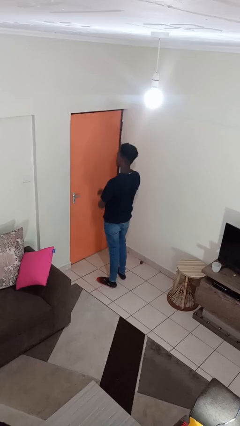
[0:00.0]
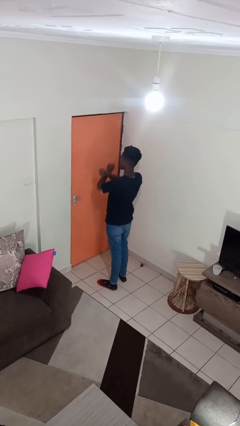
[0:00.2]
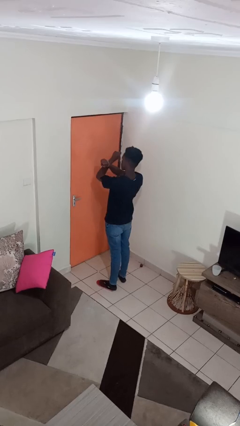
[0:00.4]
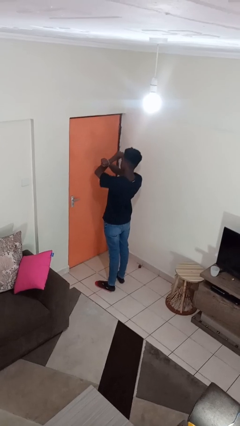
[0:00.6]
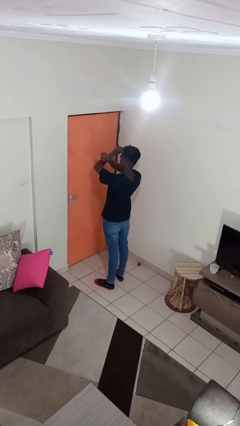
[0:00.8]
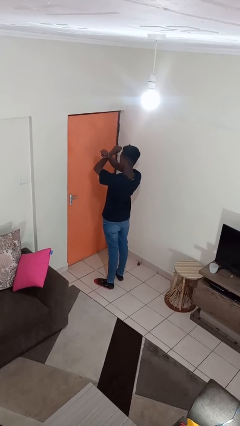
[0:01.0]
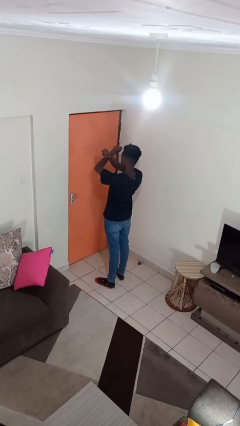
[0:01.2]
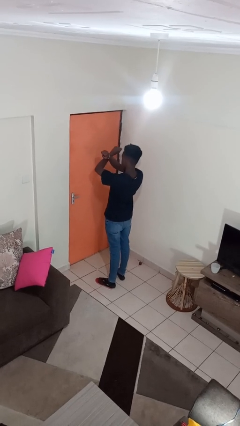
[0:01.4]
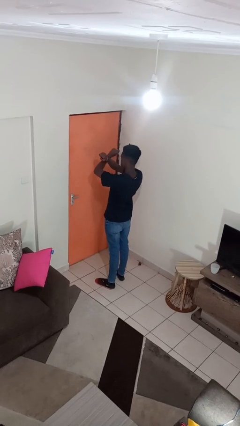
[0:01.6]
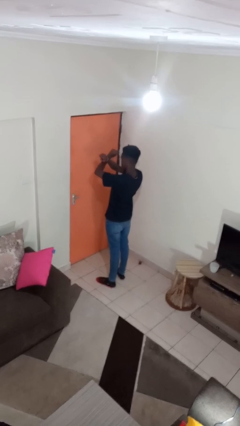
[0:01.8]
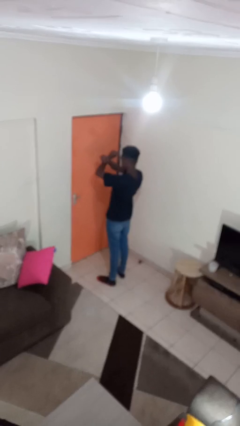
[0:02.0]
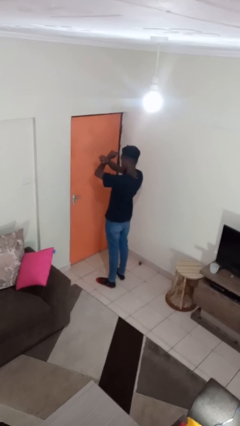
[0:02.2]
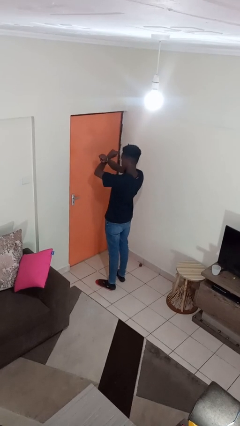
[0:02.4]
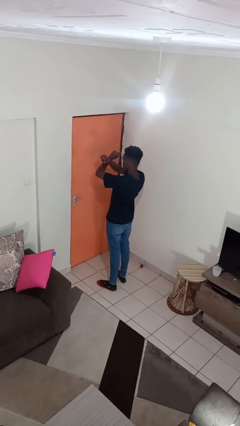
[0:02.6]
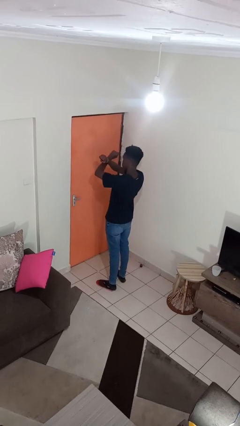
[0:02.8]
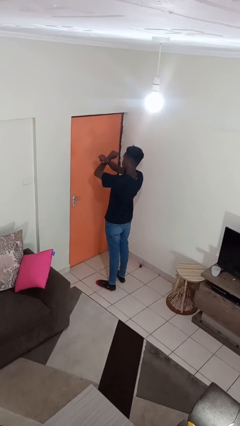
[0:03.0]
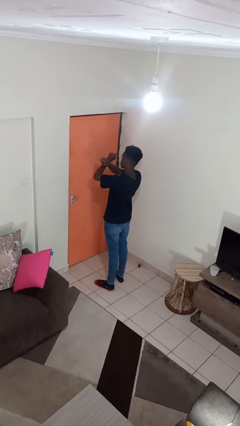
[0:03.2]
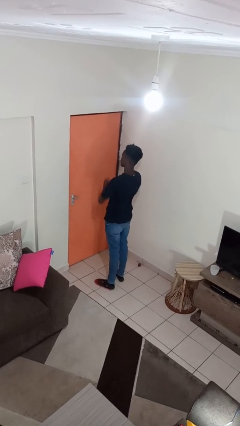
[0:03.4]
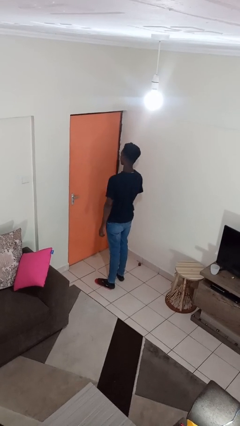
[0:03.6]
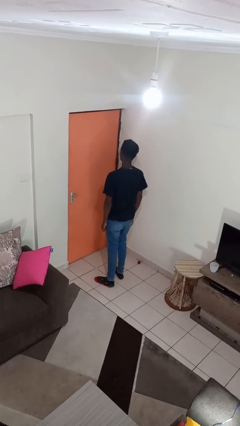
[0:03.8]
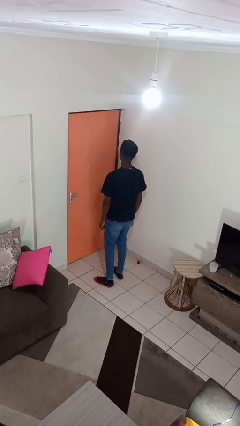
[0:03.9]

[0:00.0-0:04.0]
person gestures arms x

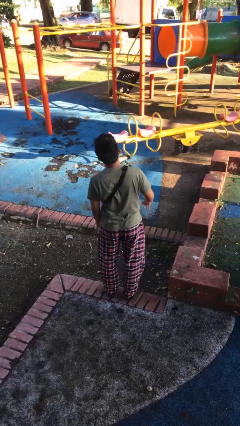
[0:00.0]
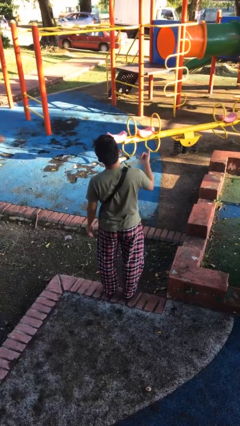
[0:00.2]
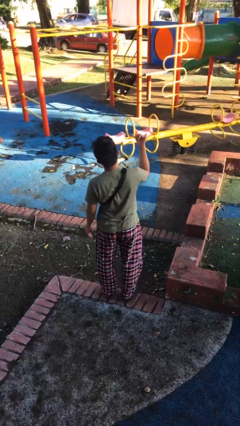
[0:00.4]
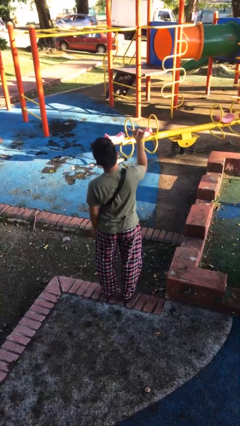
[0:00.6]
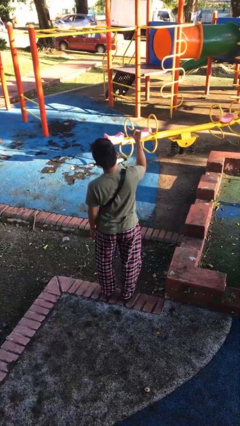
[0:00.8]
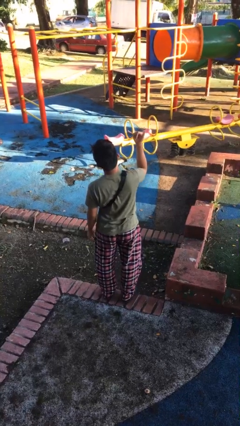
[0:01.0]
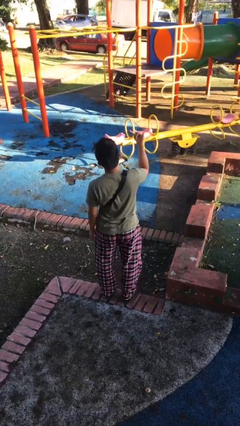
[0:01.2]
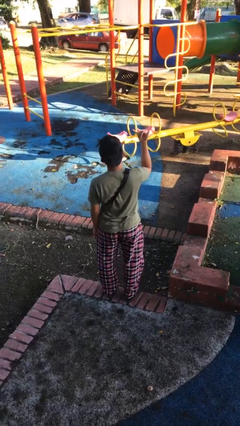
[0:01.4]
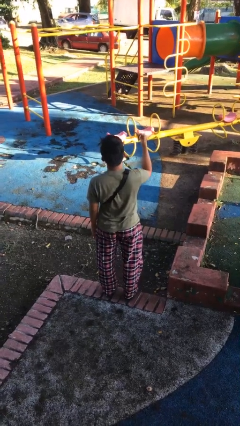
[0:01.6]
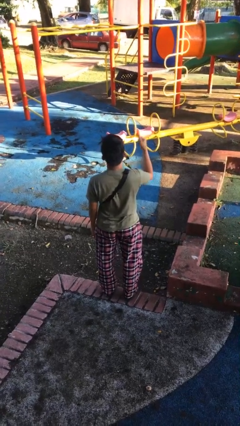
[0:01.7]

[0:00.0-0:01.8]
person gestures hang loose

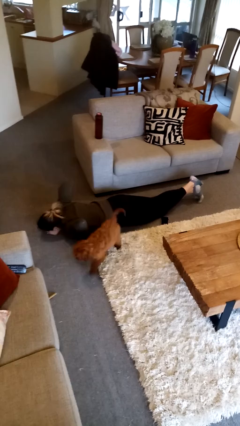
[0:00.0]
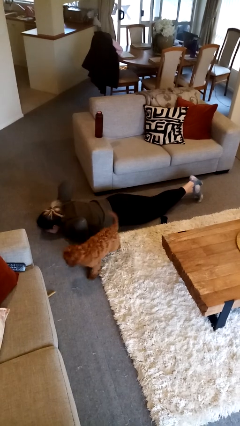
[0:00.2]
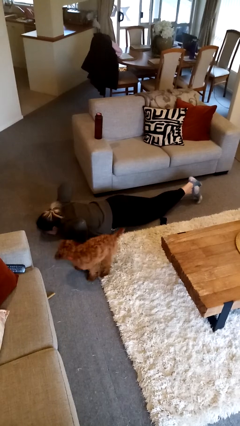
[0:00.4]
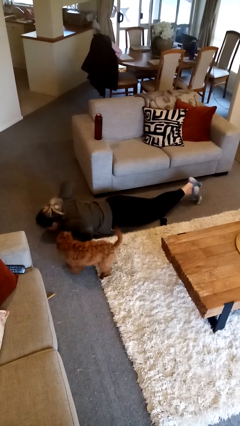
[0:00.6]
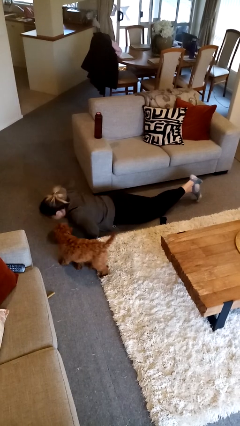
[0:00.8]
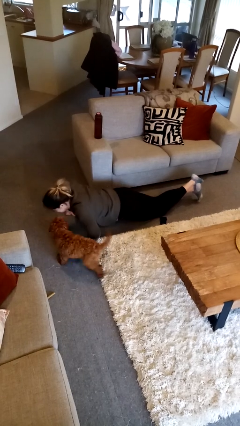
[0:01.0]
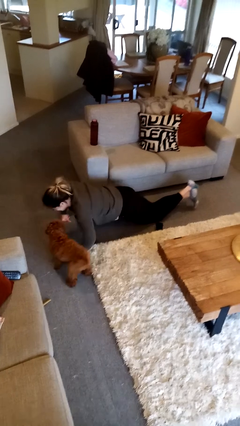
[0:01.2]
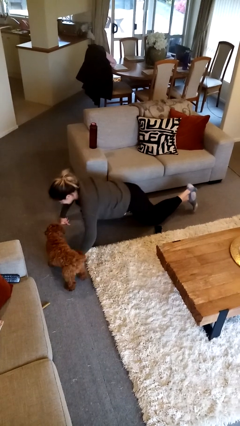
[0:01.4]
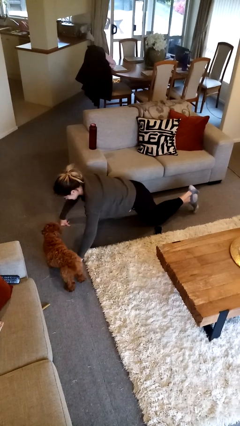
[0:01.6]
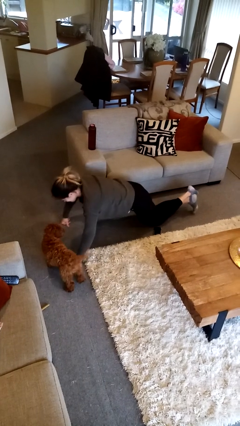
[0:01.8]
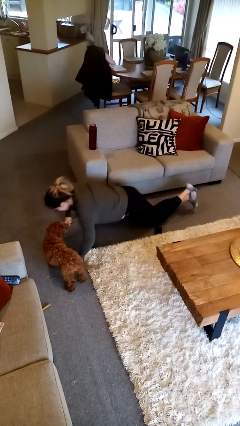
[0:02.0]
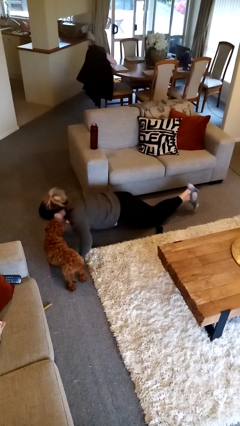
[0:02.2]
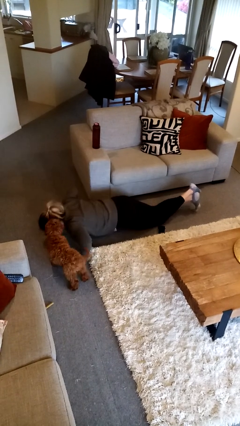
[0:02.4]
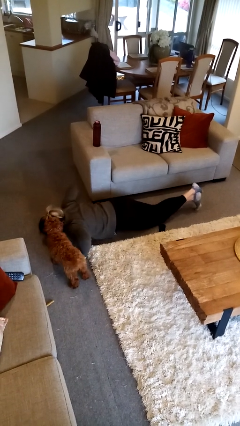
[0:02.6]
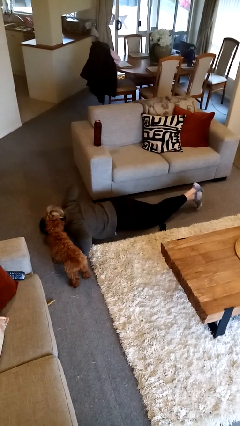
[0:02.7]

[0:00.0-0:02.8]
person exercises with pushup

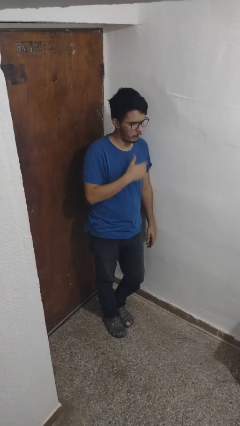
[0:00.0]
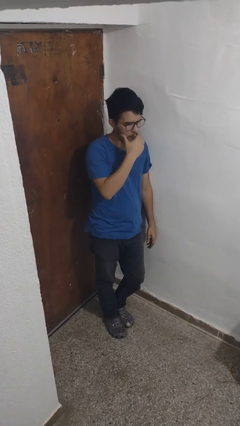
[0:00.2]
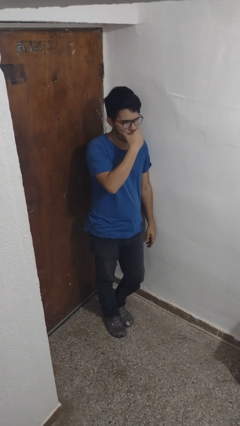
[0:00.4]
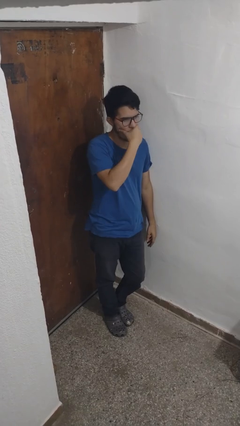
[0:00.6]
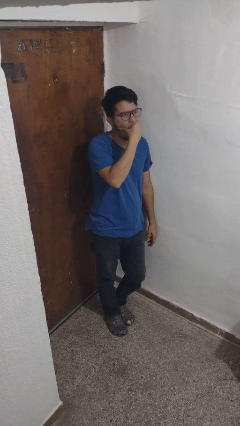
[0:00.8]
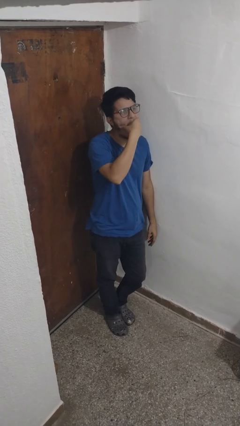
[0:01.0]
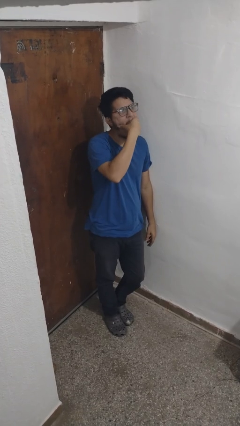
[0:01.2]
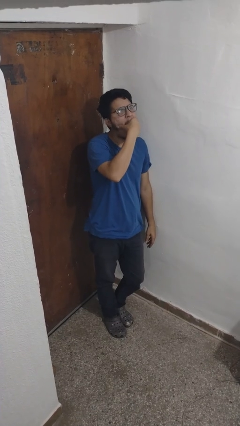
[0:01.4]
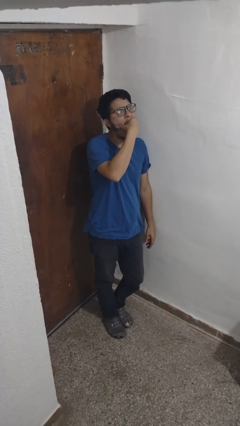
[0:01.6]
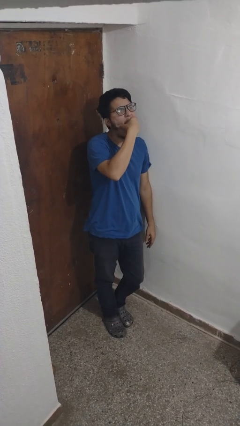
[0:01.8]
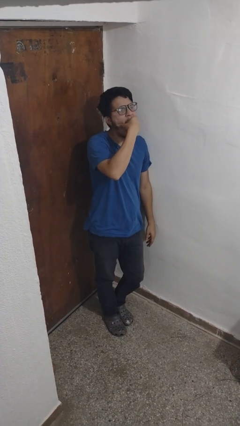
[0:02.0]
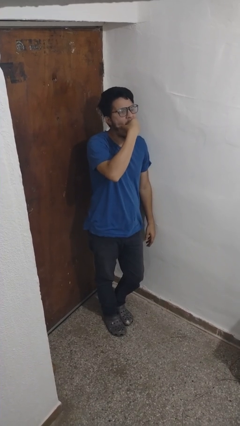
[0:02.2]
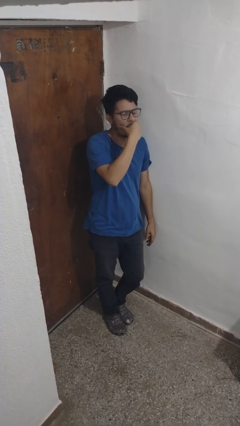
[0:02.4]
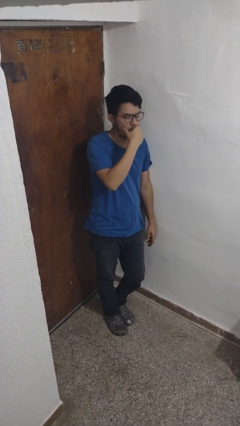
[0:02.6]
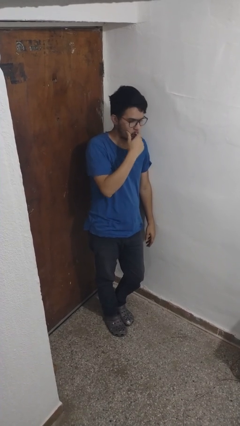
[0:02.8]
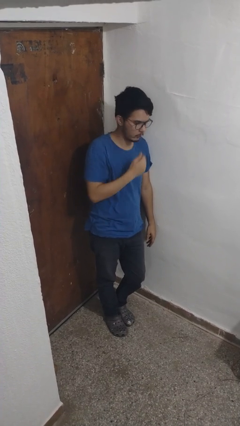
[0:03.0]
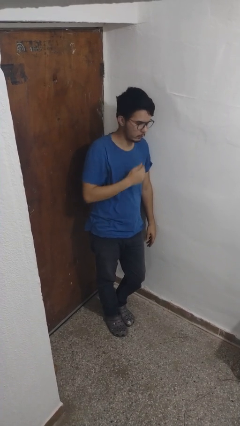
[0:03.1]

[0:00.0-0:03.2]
person yawns

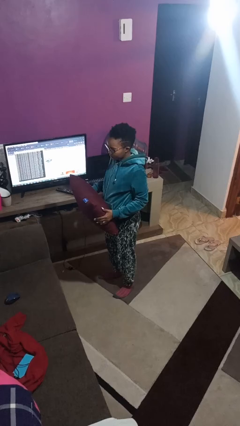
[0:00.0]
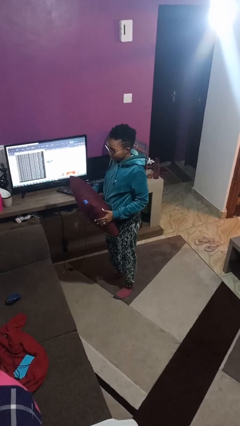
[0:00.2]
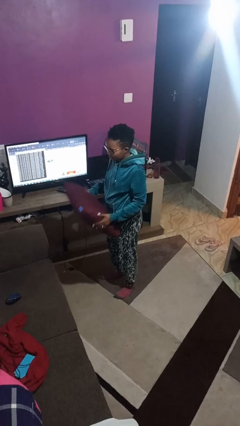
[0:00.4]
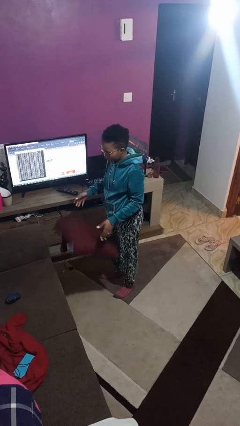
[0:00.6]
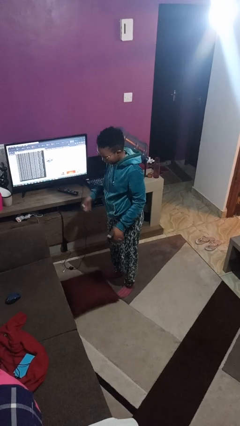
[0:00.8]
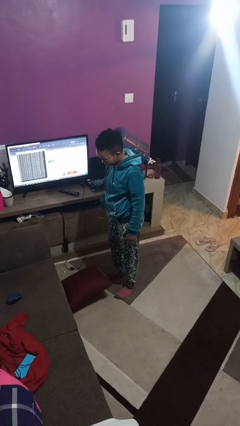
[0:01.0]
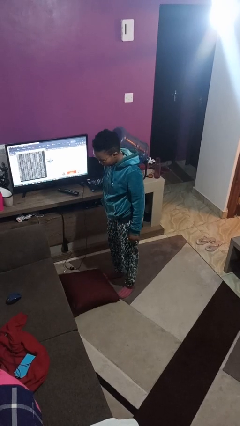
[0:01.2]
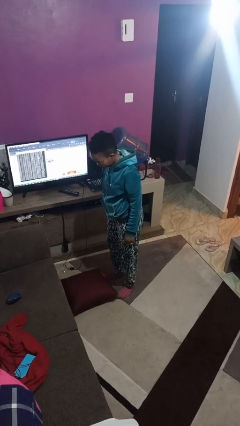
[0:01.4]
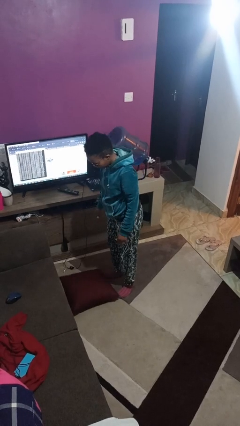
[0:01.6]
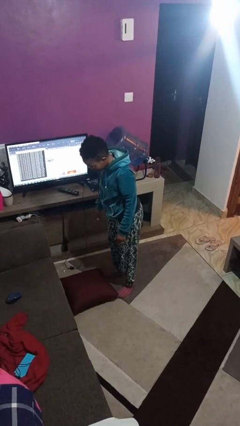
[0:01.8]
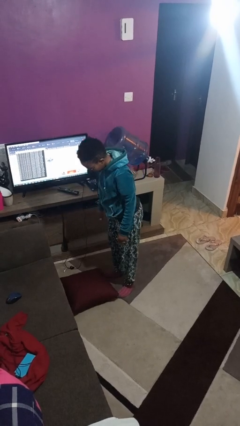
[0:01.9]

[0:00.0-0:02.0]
person throws object to ground

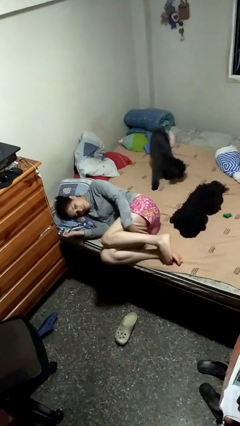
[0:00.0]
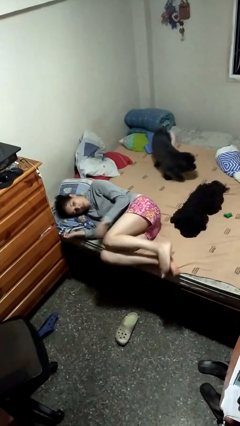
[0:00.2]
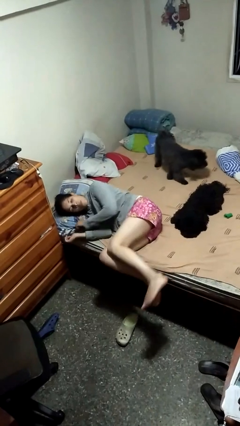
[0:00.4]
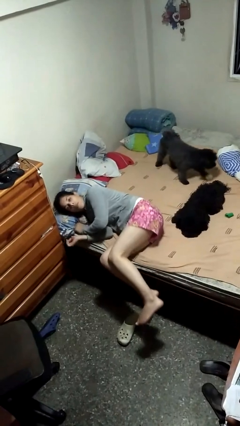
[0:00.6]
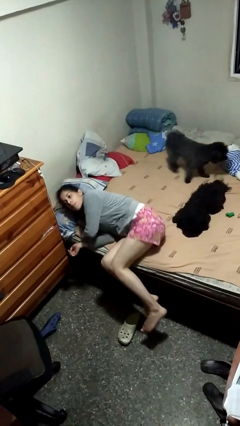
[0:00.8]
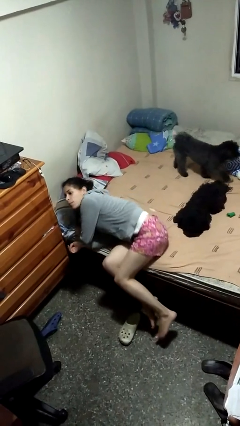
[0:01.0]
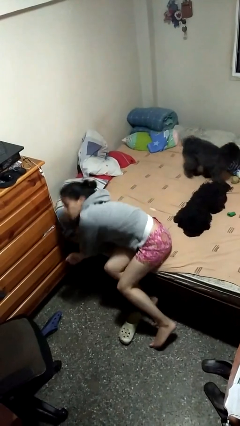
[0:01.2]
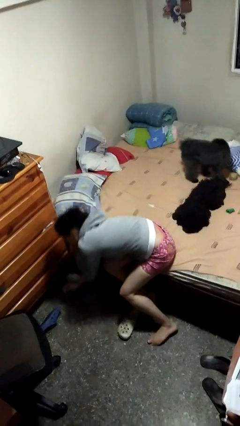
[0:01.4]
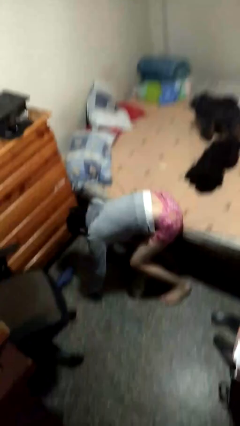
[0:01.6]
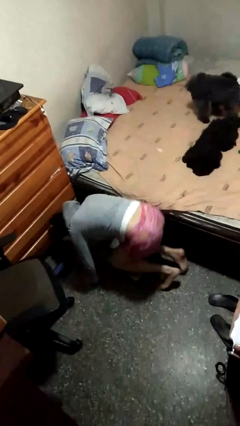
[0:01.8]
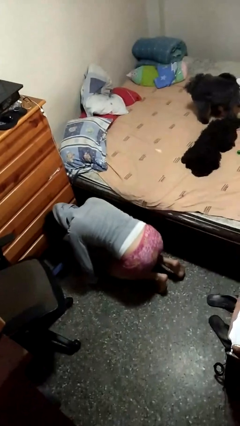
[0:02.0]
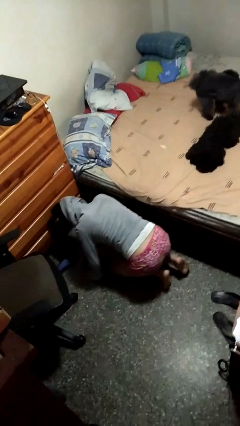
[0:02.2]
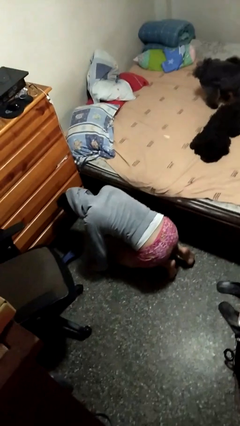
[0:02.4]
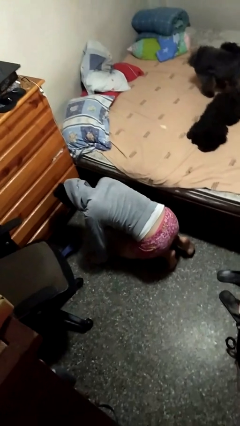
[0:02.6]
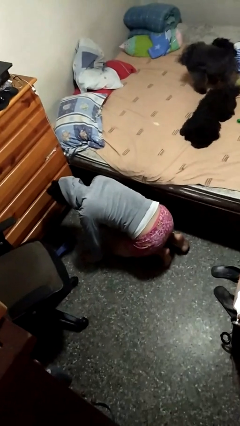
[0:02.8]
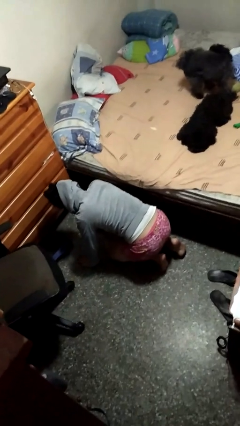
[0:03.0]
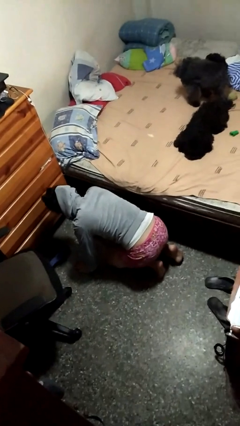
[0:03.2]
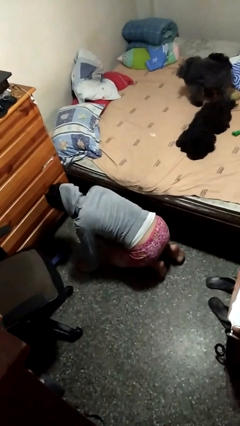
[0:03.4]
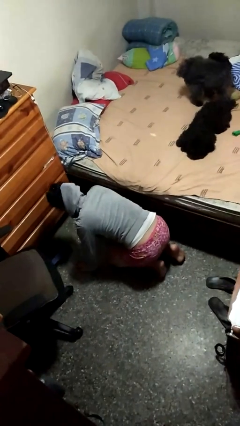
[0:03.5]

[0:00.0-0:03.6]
person falls from bed

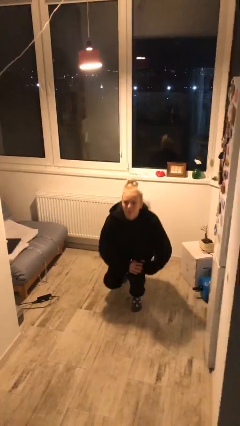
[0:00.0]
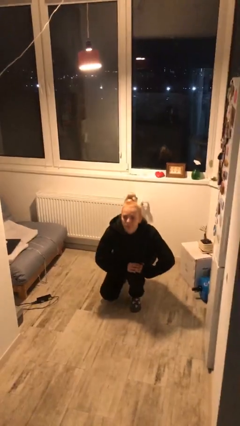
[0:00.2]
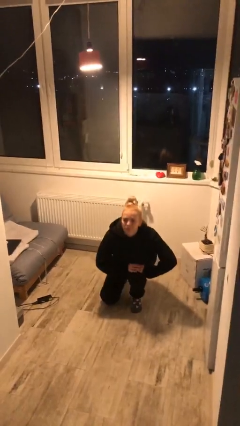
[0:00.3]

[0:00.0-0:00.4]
person sits down
